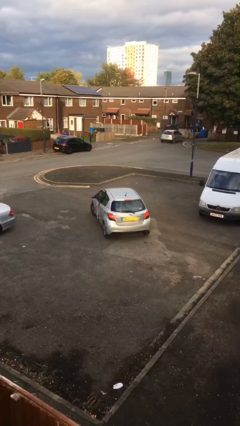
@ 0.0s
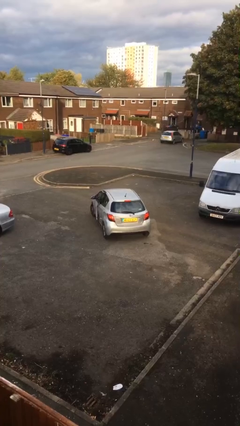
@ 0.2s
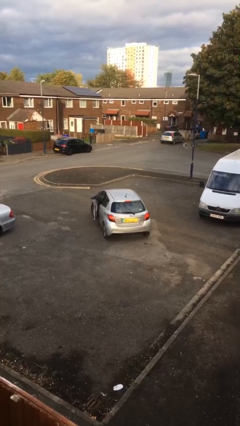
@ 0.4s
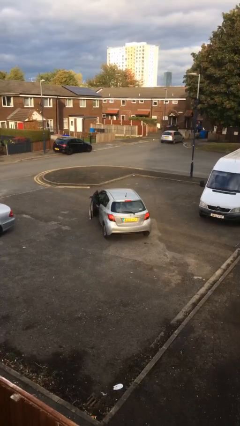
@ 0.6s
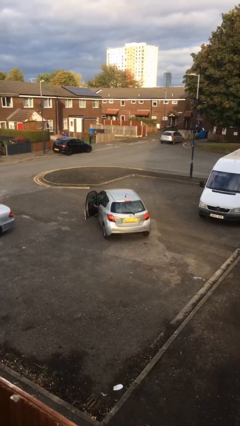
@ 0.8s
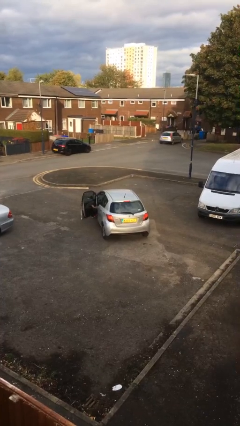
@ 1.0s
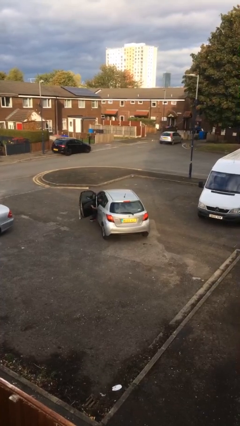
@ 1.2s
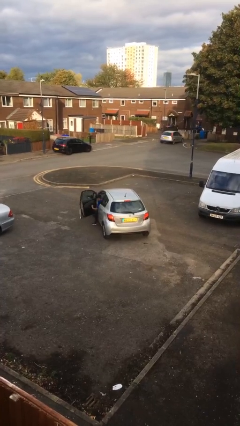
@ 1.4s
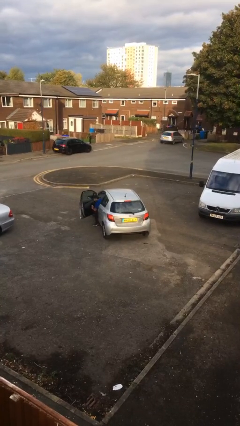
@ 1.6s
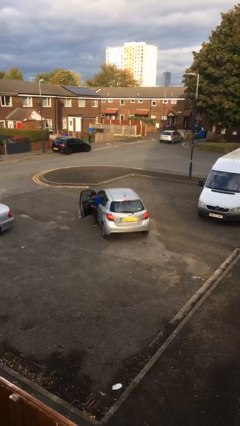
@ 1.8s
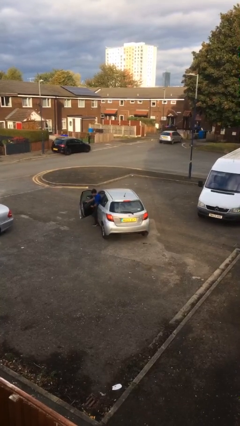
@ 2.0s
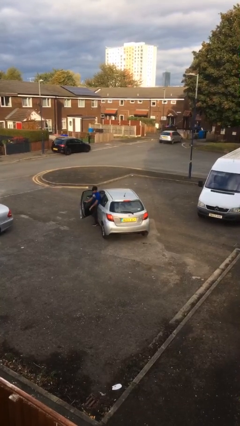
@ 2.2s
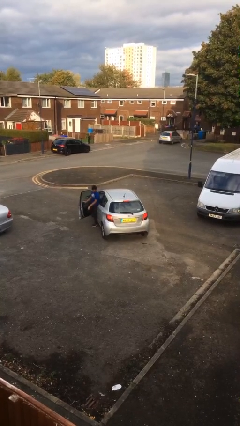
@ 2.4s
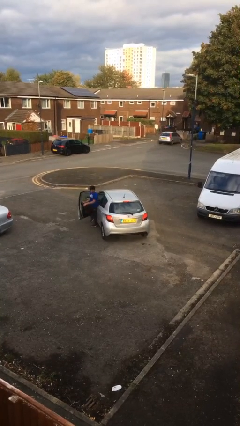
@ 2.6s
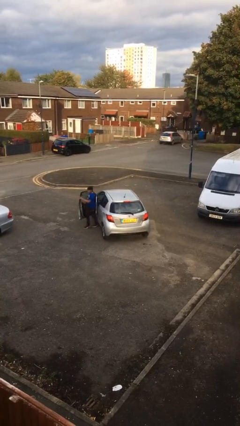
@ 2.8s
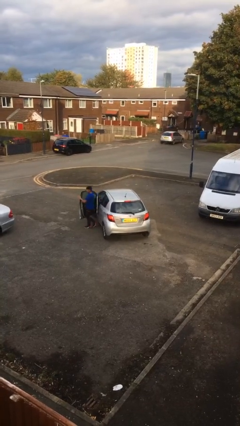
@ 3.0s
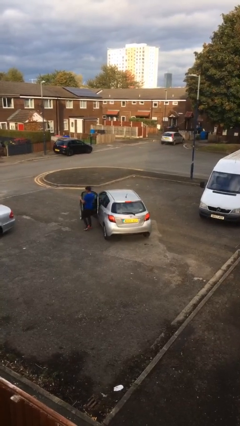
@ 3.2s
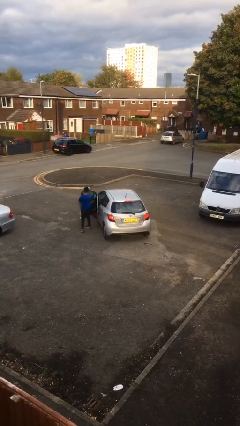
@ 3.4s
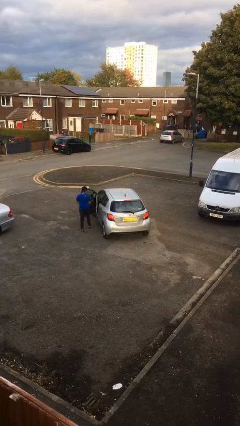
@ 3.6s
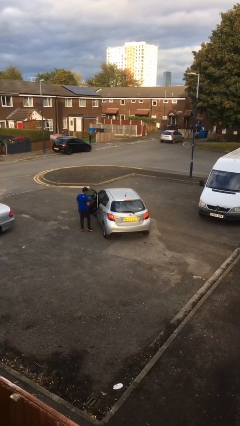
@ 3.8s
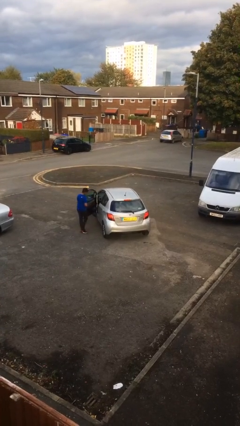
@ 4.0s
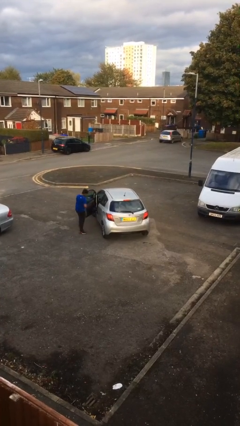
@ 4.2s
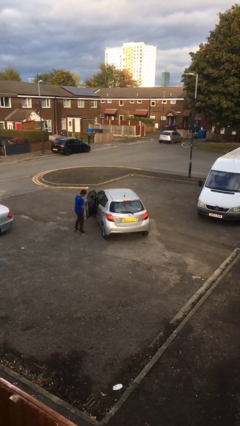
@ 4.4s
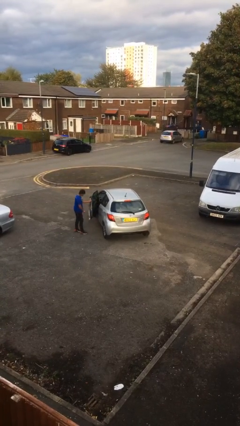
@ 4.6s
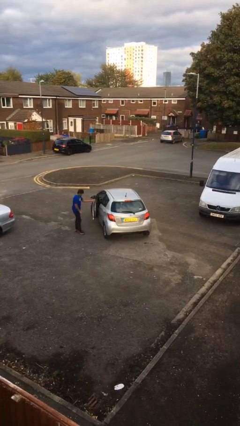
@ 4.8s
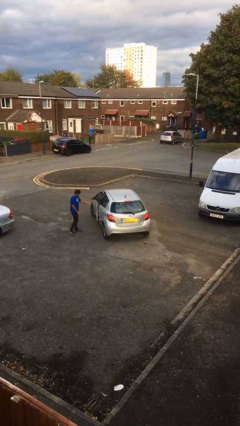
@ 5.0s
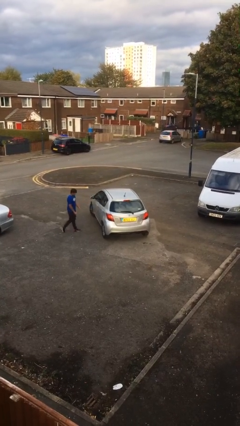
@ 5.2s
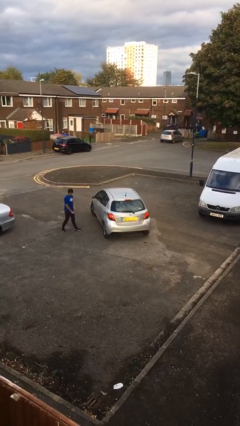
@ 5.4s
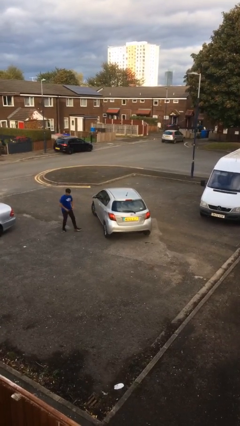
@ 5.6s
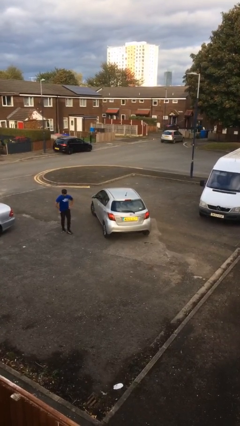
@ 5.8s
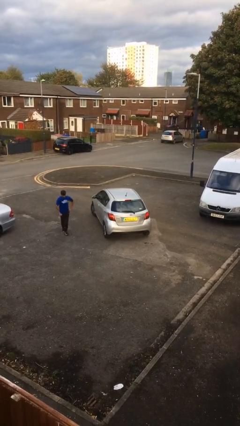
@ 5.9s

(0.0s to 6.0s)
car drops off person

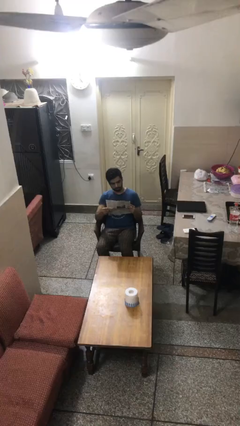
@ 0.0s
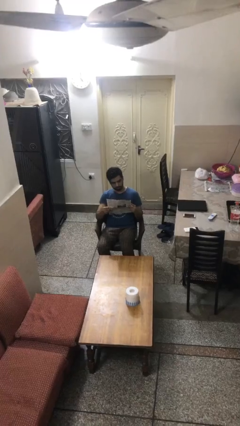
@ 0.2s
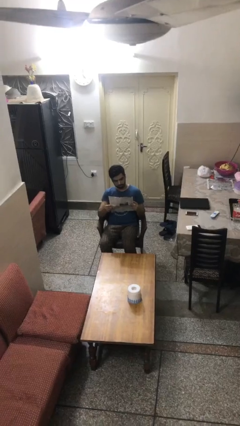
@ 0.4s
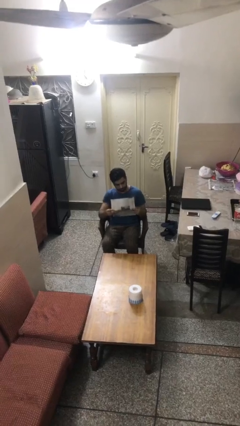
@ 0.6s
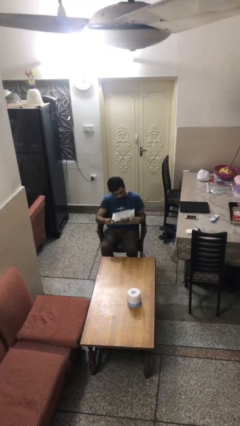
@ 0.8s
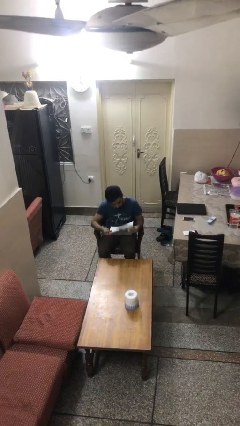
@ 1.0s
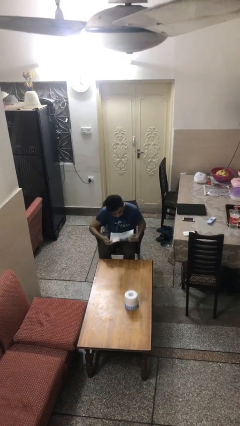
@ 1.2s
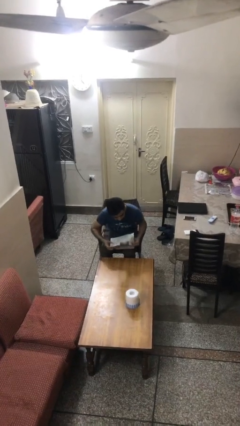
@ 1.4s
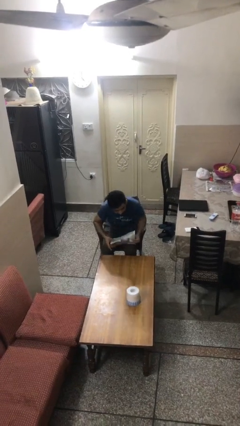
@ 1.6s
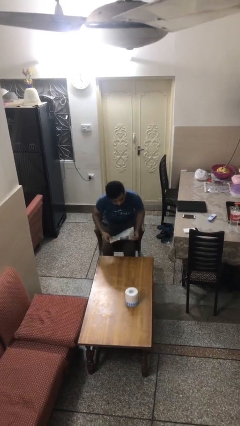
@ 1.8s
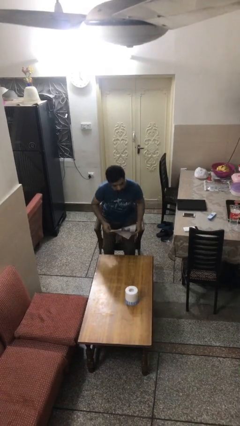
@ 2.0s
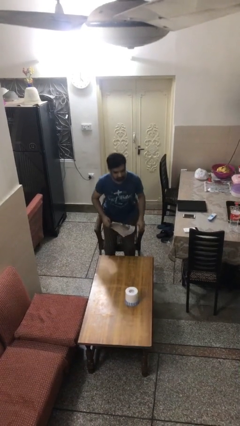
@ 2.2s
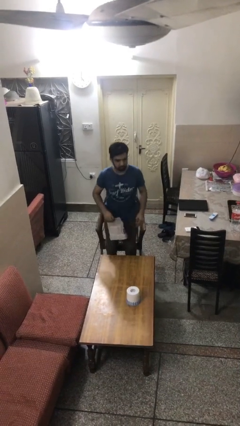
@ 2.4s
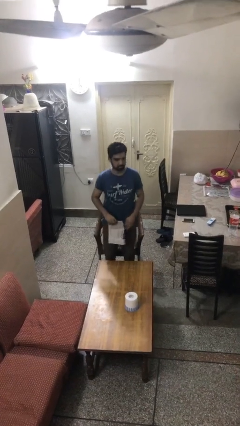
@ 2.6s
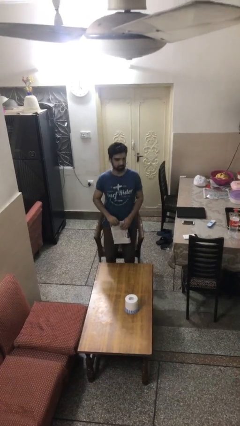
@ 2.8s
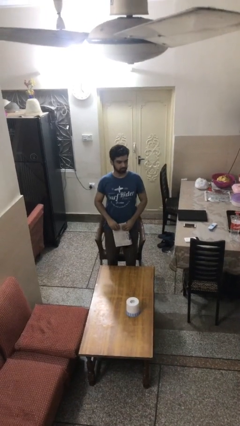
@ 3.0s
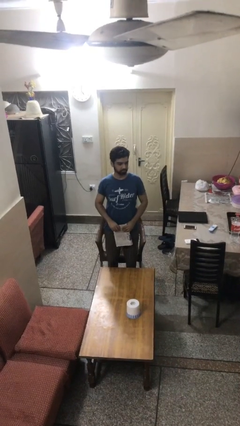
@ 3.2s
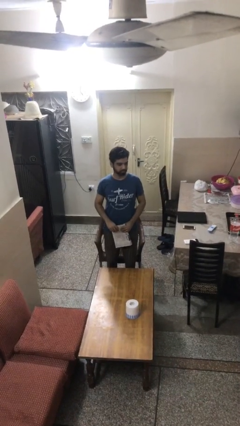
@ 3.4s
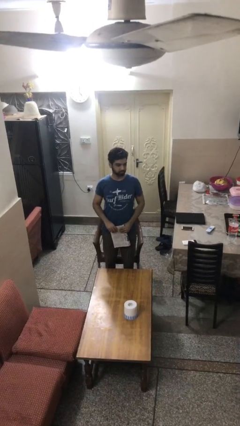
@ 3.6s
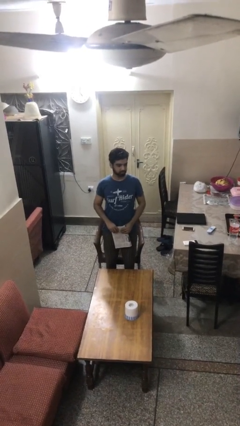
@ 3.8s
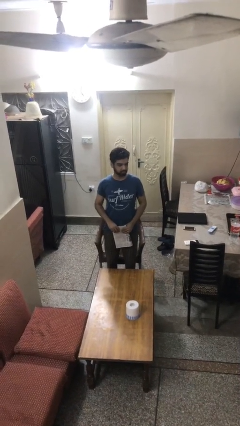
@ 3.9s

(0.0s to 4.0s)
person stands up

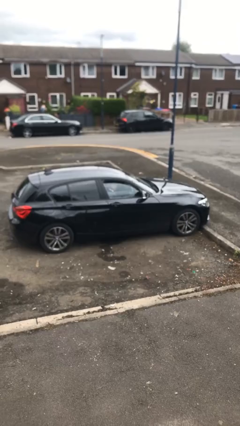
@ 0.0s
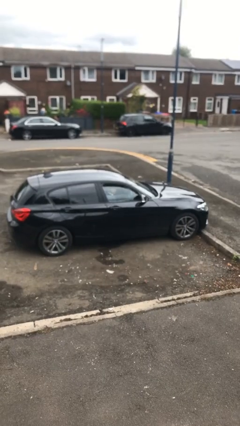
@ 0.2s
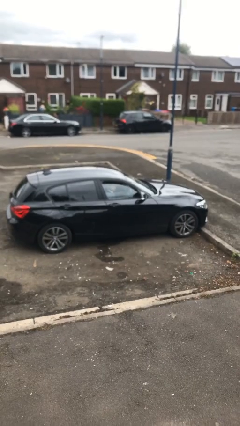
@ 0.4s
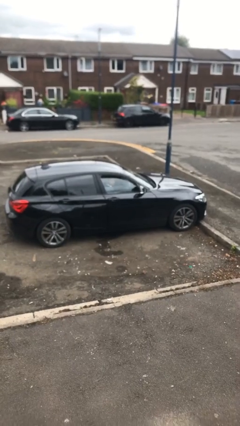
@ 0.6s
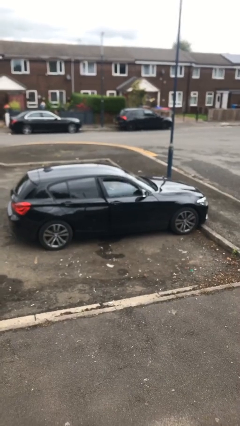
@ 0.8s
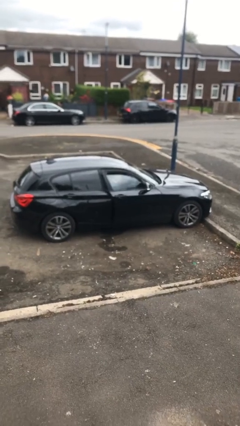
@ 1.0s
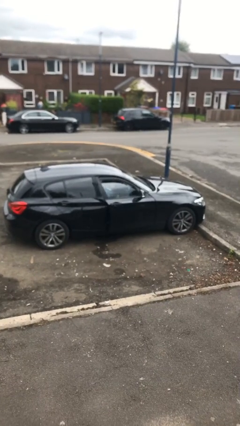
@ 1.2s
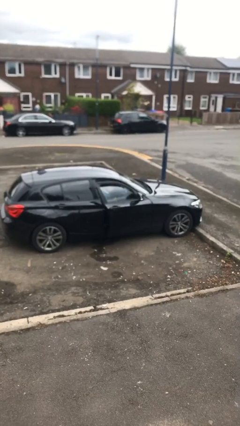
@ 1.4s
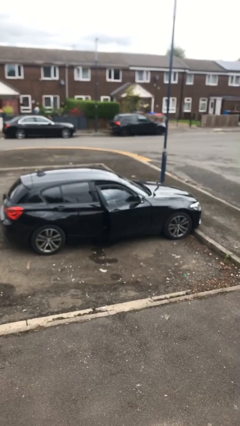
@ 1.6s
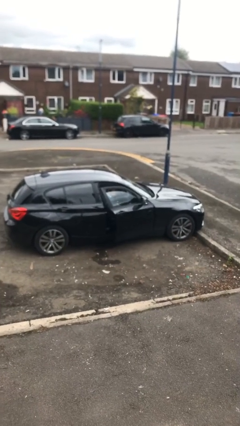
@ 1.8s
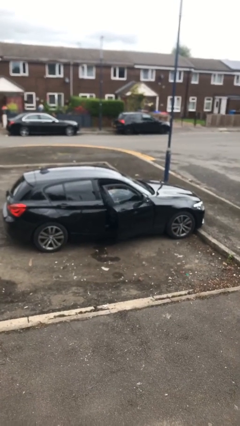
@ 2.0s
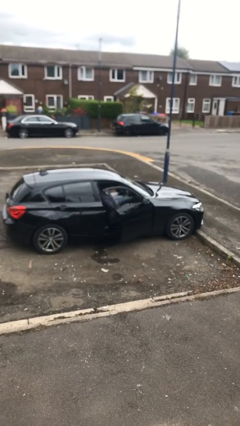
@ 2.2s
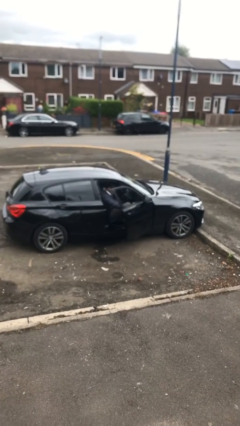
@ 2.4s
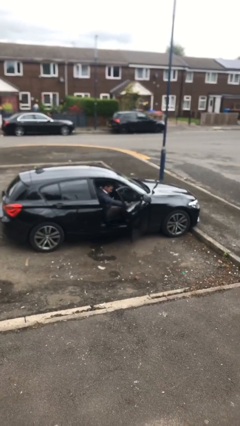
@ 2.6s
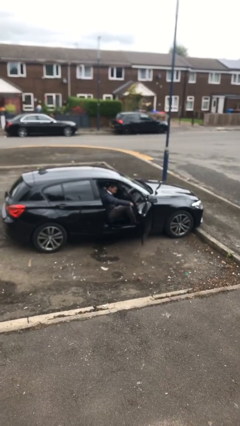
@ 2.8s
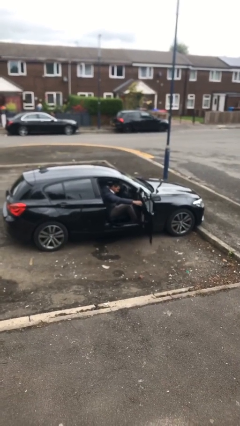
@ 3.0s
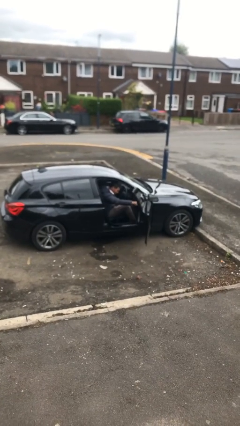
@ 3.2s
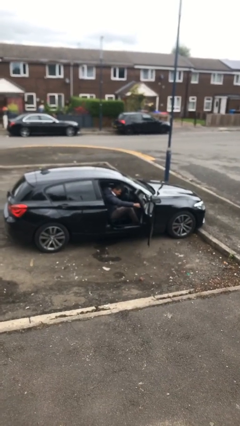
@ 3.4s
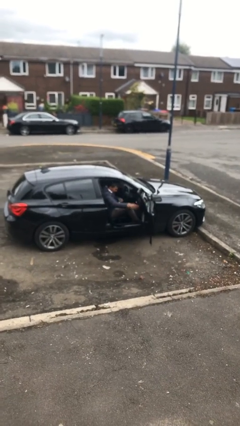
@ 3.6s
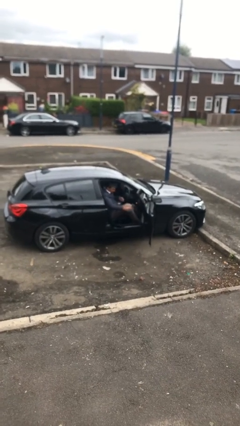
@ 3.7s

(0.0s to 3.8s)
person opens car door

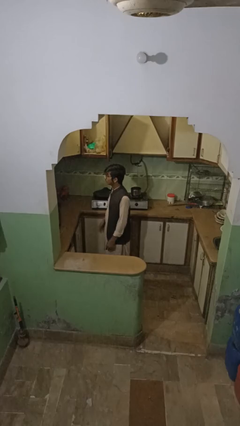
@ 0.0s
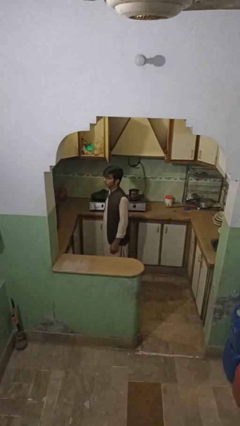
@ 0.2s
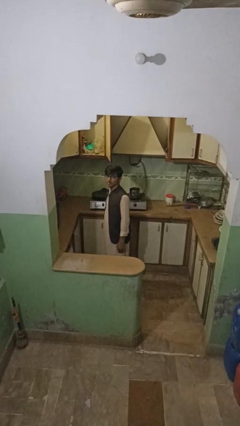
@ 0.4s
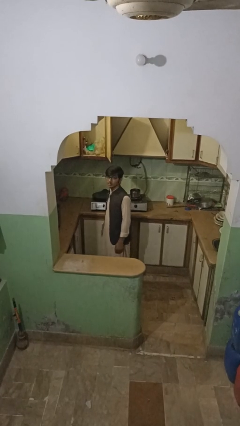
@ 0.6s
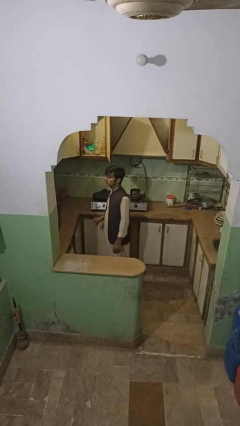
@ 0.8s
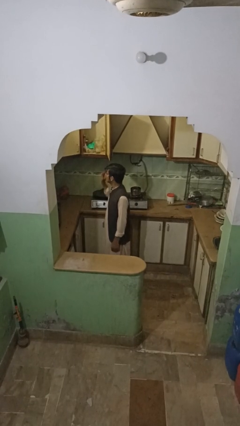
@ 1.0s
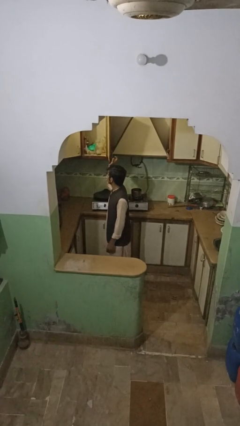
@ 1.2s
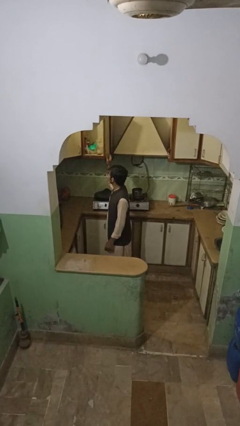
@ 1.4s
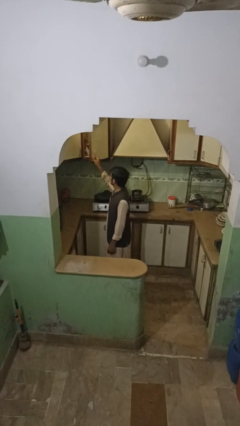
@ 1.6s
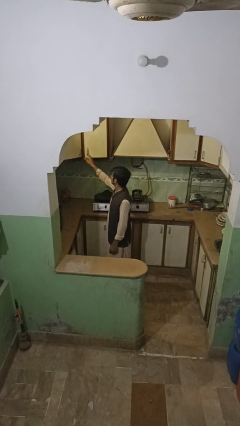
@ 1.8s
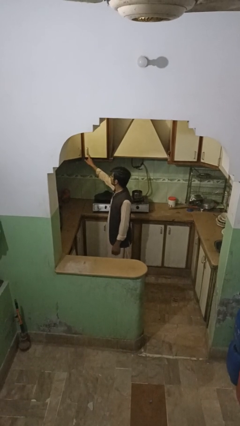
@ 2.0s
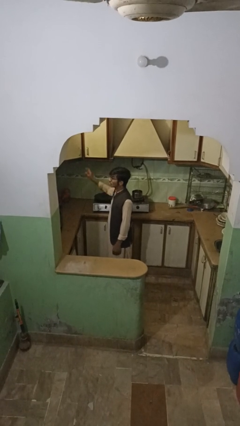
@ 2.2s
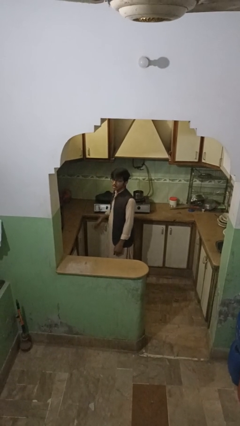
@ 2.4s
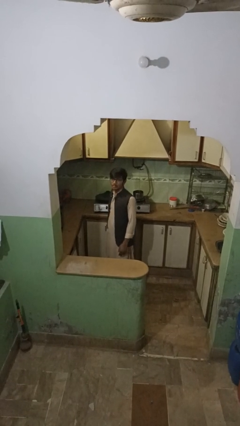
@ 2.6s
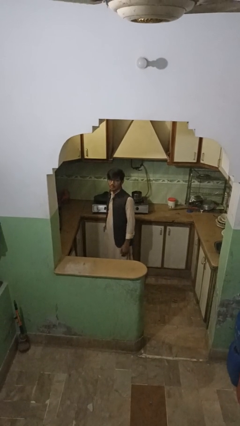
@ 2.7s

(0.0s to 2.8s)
person closes cabinet

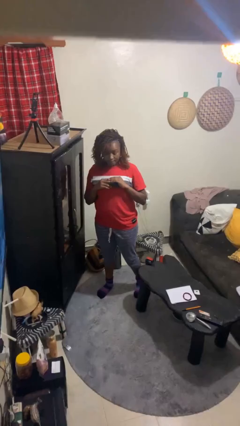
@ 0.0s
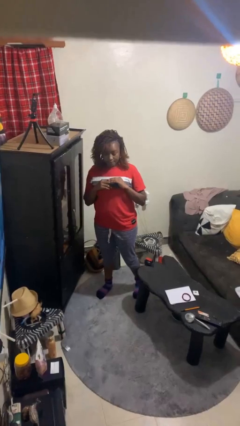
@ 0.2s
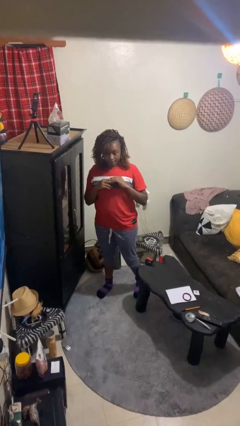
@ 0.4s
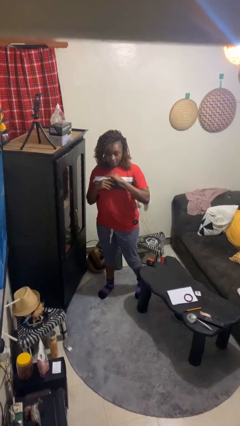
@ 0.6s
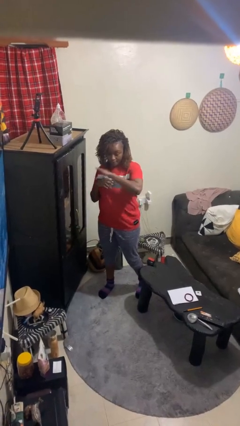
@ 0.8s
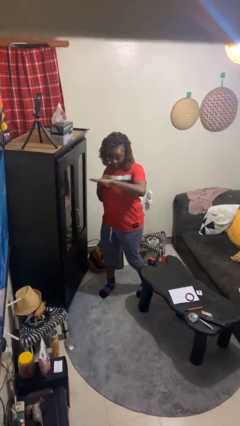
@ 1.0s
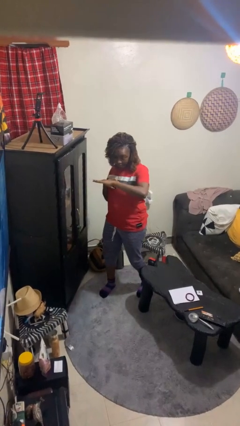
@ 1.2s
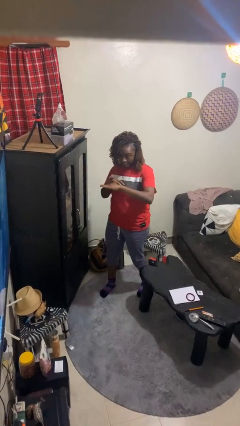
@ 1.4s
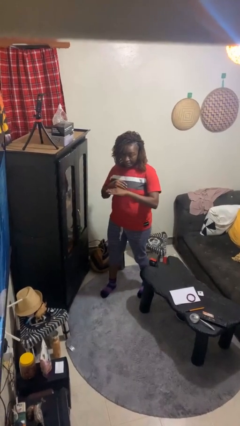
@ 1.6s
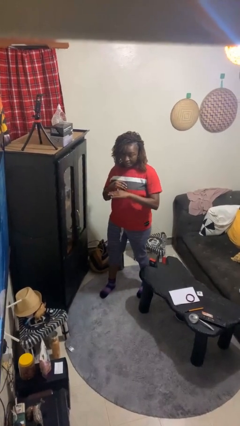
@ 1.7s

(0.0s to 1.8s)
person karate chop
